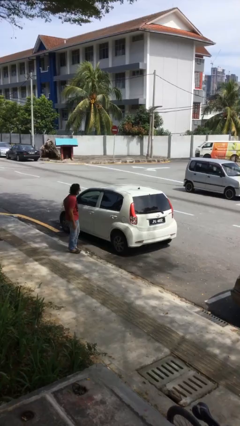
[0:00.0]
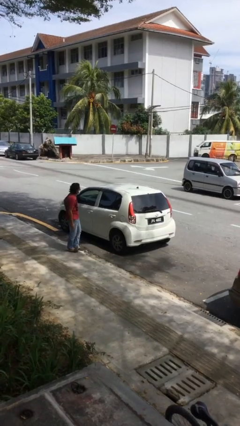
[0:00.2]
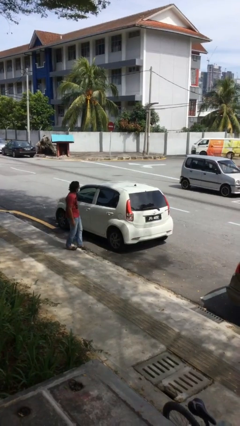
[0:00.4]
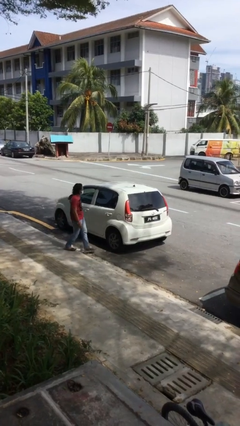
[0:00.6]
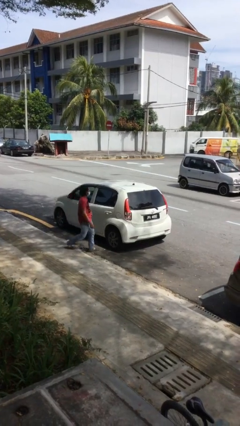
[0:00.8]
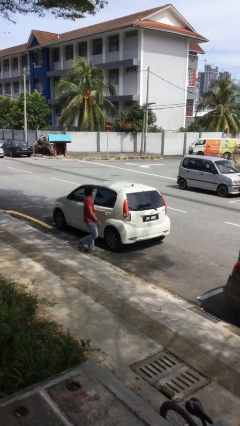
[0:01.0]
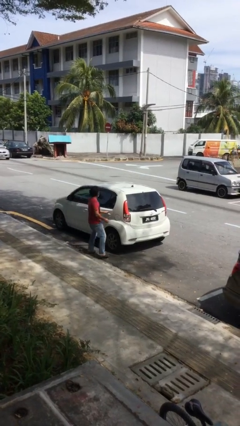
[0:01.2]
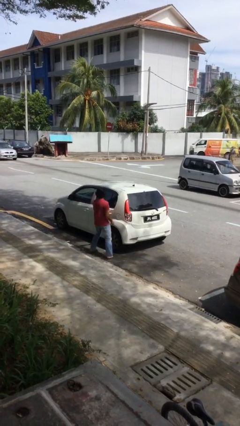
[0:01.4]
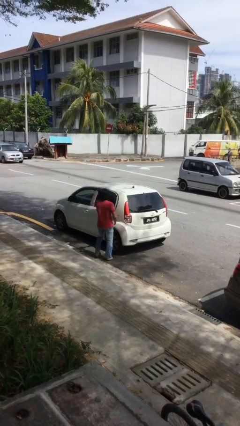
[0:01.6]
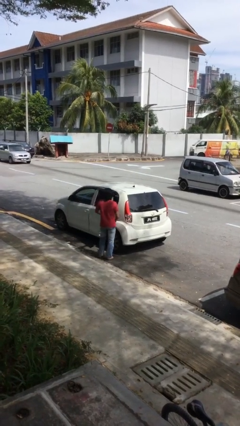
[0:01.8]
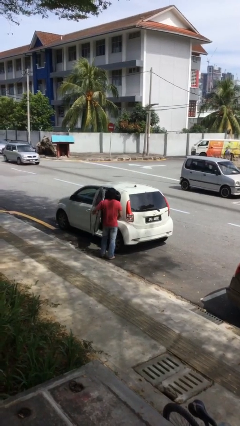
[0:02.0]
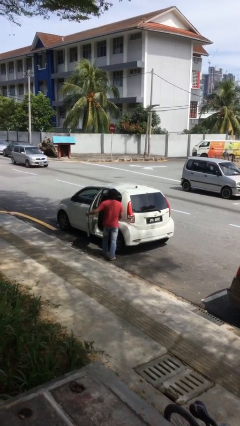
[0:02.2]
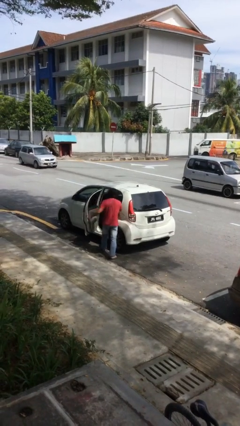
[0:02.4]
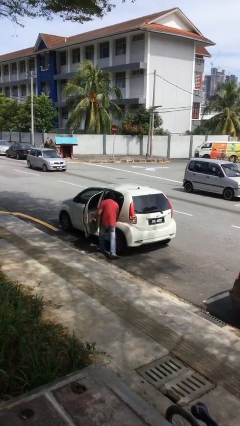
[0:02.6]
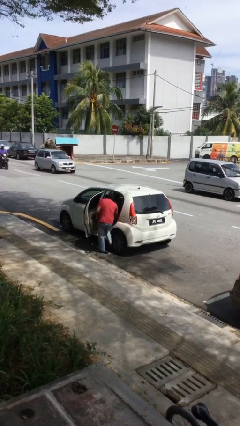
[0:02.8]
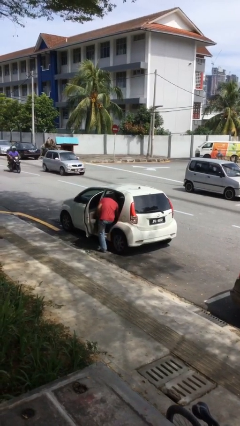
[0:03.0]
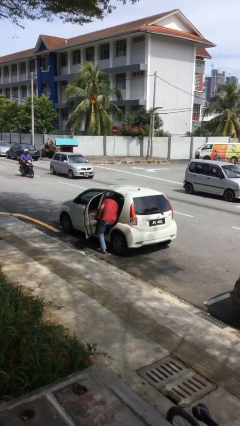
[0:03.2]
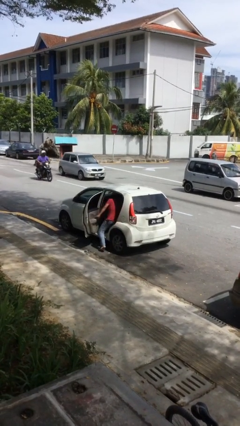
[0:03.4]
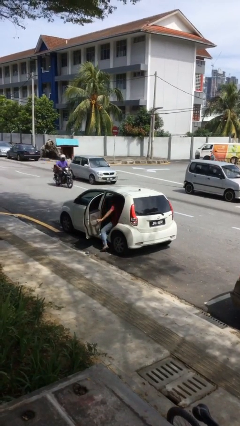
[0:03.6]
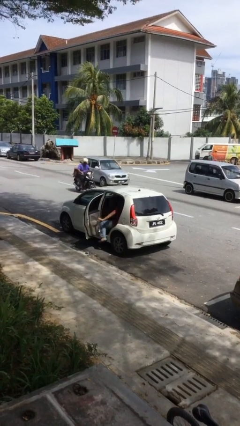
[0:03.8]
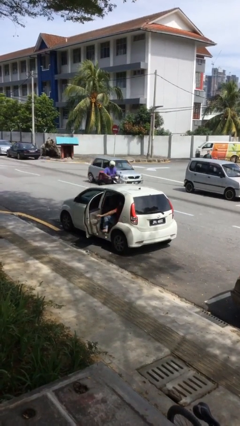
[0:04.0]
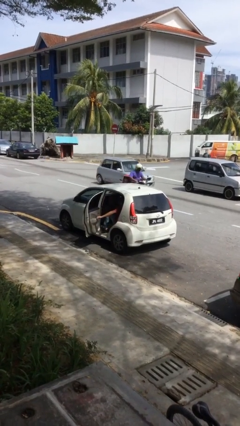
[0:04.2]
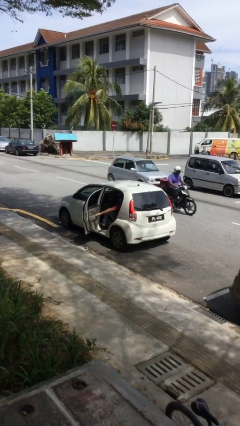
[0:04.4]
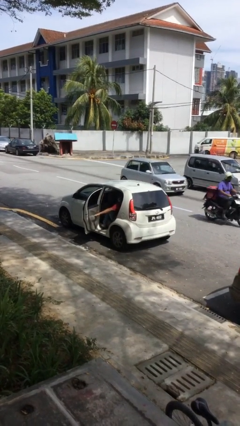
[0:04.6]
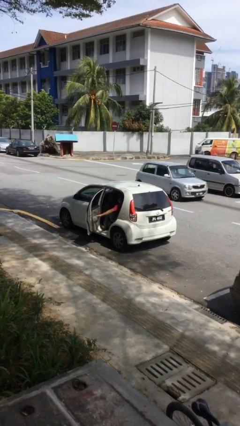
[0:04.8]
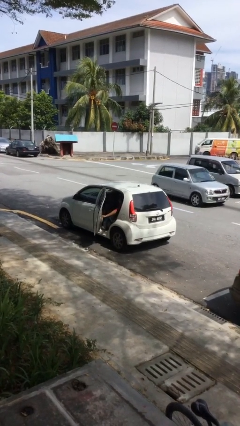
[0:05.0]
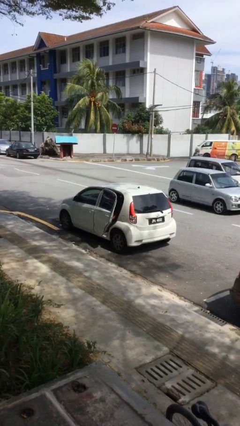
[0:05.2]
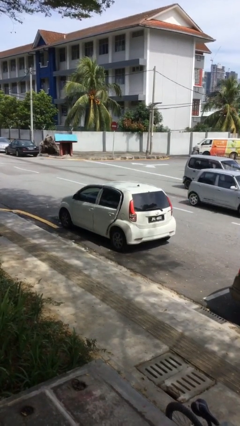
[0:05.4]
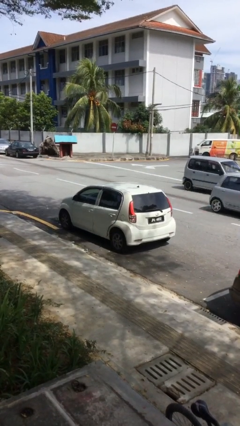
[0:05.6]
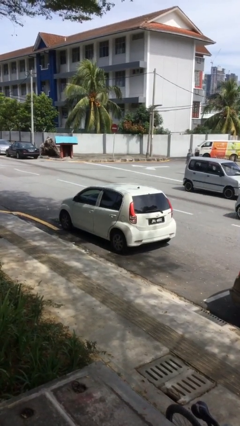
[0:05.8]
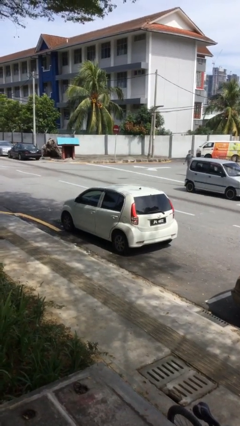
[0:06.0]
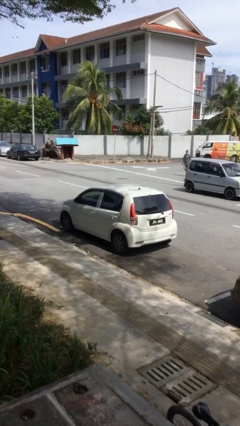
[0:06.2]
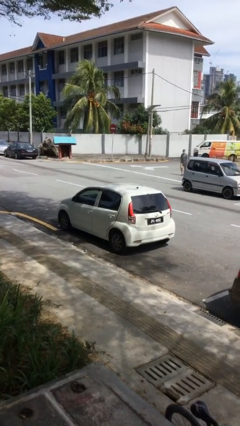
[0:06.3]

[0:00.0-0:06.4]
car picks up person

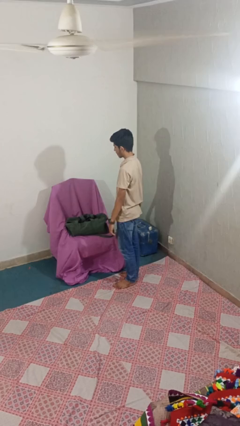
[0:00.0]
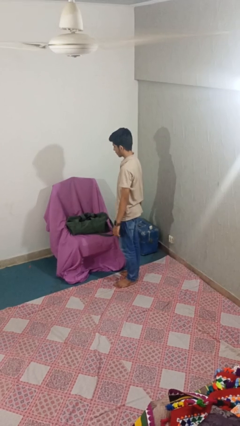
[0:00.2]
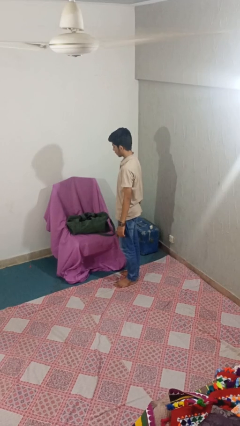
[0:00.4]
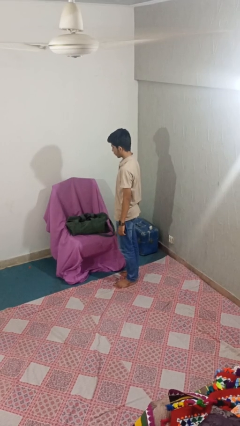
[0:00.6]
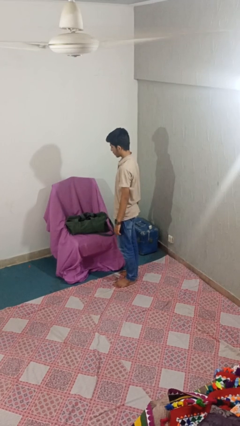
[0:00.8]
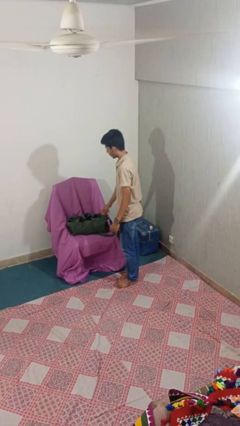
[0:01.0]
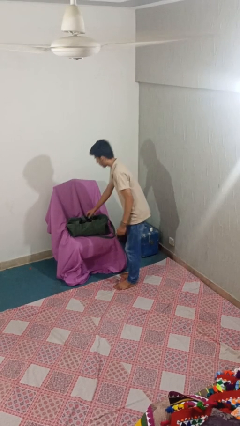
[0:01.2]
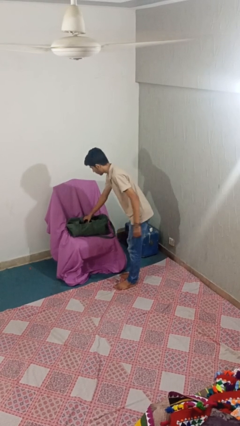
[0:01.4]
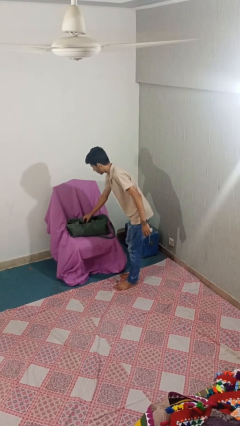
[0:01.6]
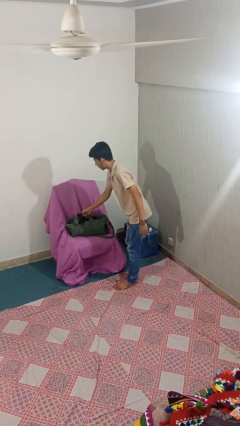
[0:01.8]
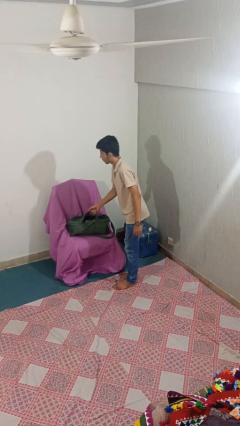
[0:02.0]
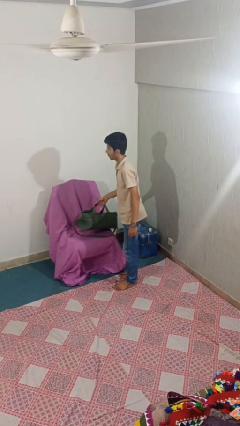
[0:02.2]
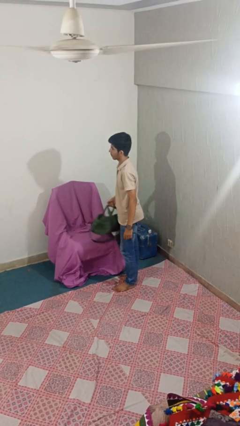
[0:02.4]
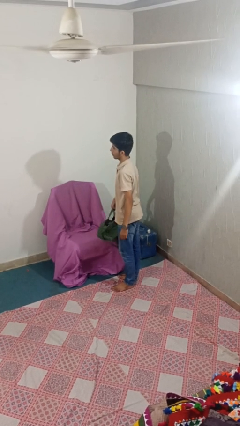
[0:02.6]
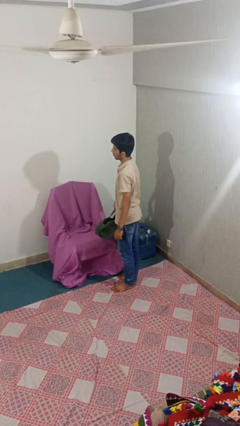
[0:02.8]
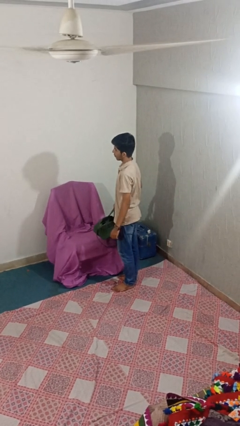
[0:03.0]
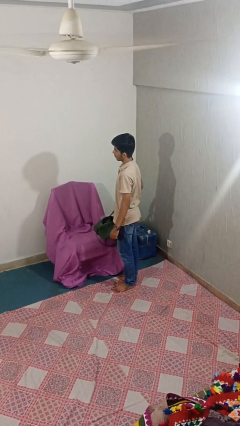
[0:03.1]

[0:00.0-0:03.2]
person picks up object from couch

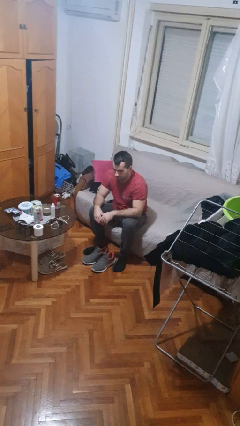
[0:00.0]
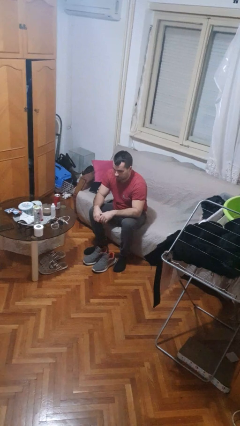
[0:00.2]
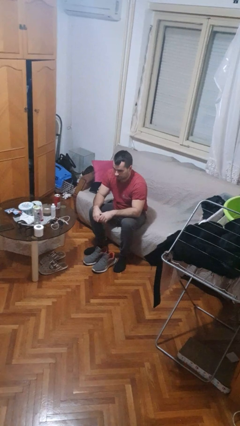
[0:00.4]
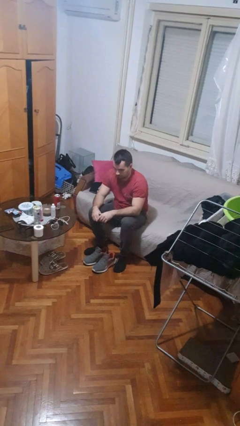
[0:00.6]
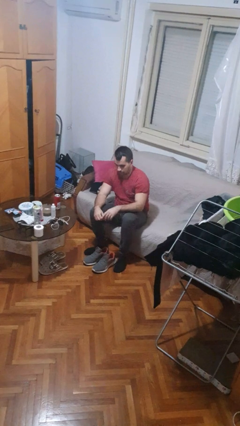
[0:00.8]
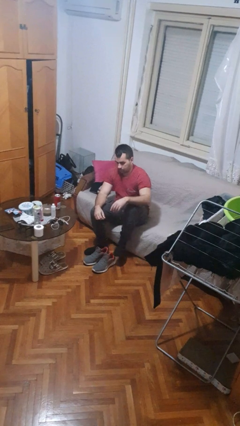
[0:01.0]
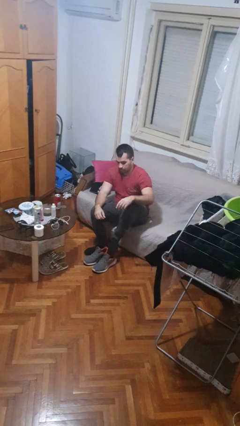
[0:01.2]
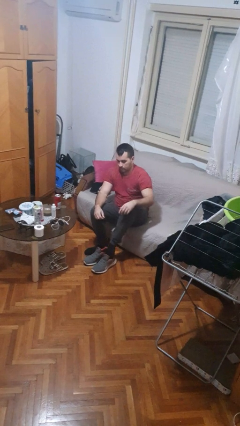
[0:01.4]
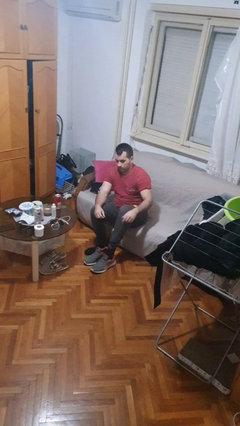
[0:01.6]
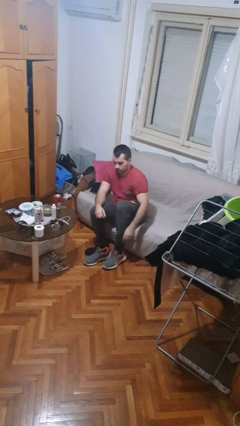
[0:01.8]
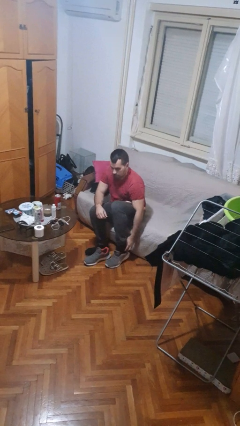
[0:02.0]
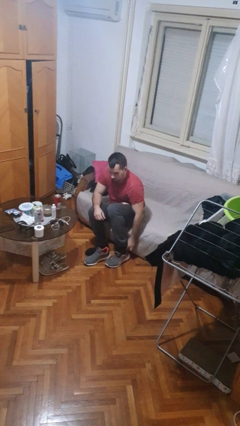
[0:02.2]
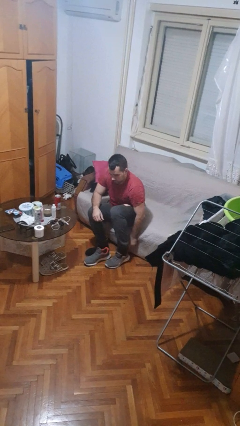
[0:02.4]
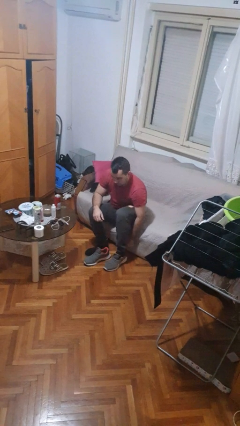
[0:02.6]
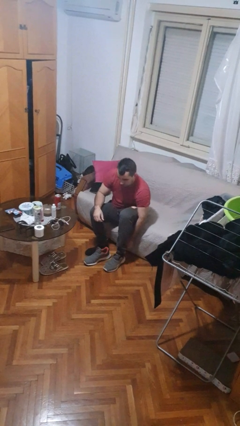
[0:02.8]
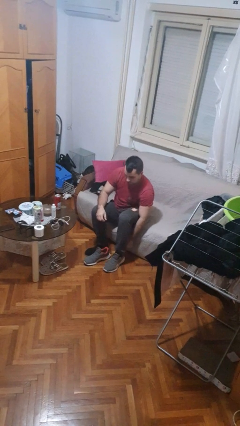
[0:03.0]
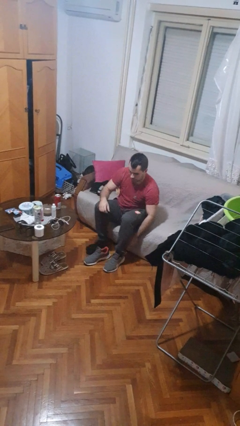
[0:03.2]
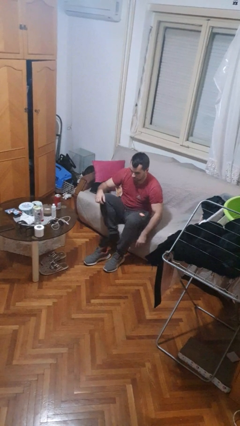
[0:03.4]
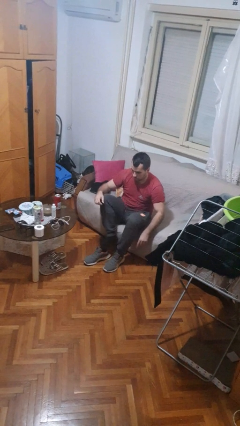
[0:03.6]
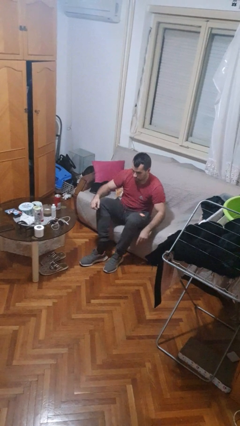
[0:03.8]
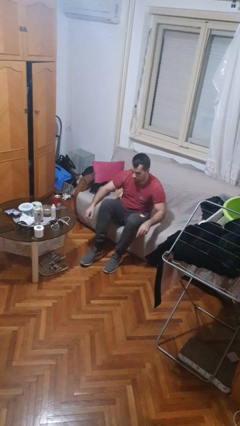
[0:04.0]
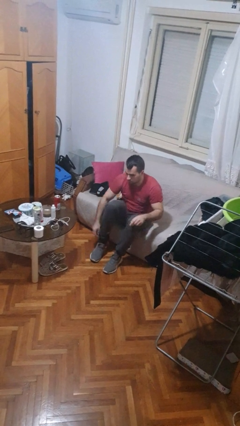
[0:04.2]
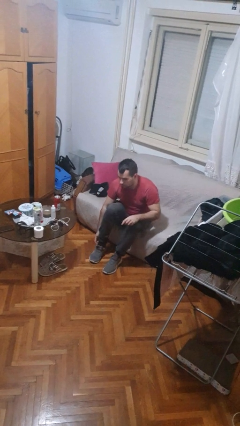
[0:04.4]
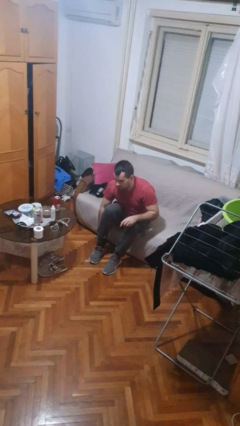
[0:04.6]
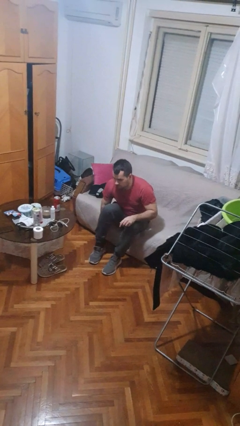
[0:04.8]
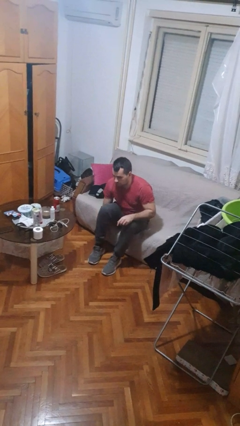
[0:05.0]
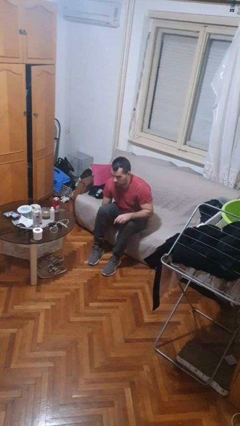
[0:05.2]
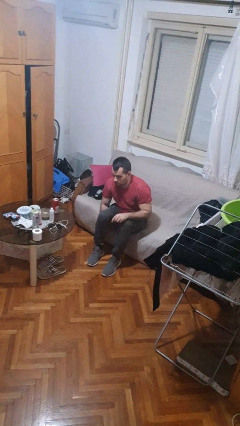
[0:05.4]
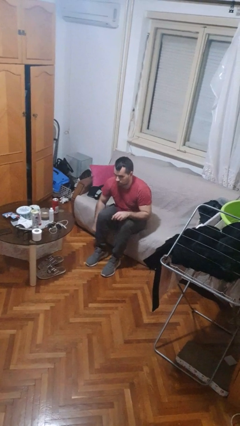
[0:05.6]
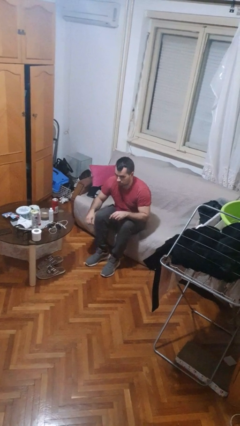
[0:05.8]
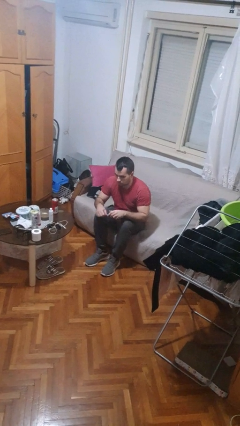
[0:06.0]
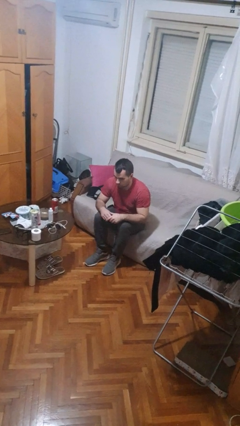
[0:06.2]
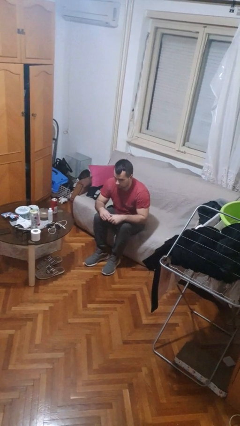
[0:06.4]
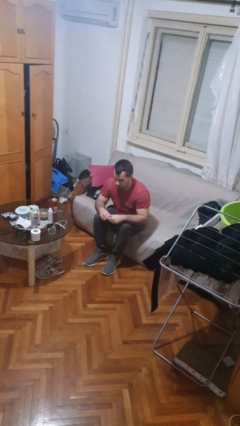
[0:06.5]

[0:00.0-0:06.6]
person puts on shoes

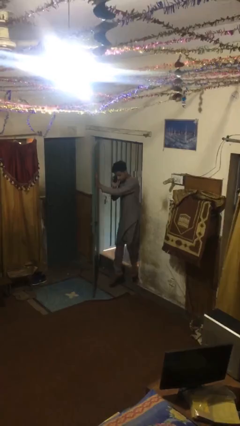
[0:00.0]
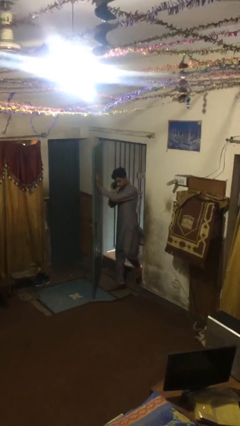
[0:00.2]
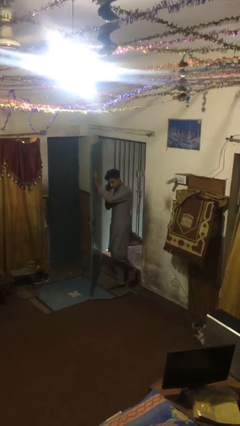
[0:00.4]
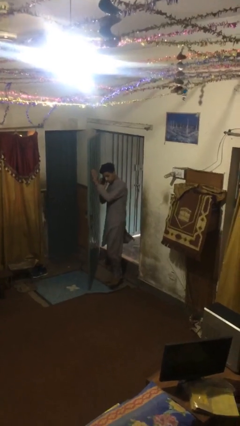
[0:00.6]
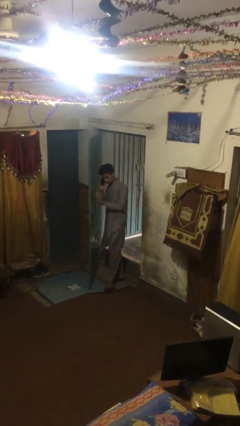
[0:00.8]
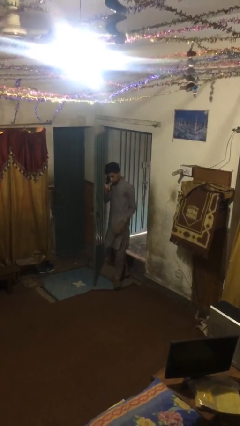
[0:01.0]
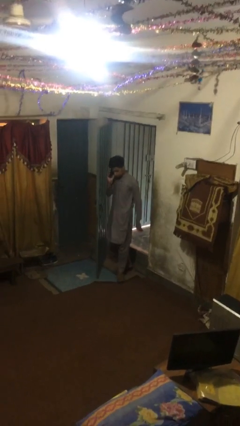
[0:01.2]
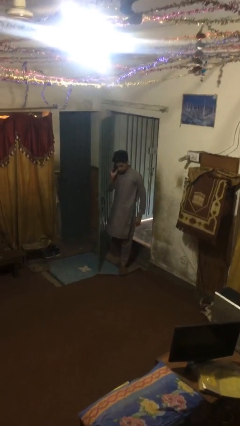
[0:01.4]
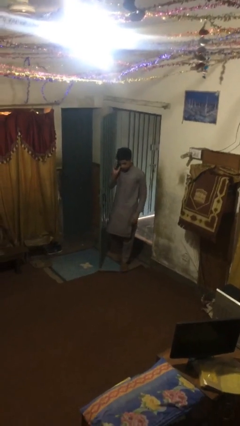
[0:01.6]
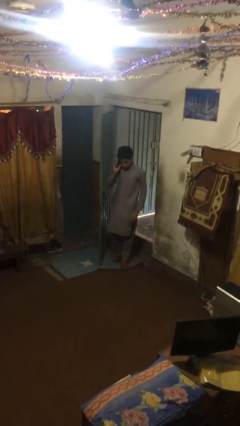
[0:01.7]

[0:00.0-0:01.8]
person enters scene through structure
